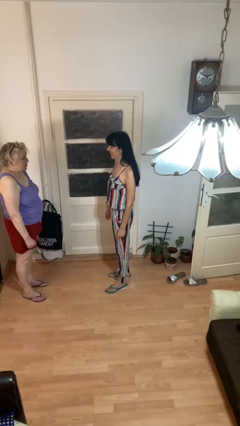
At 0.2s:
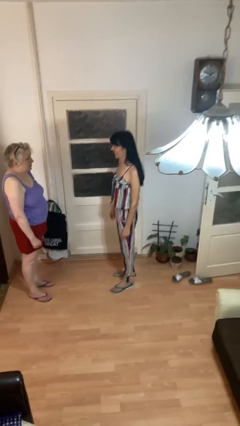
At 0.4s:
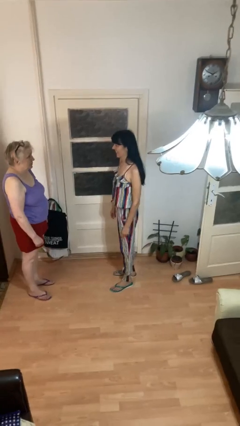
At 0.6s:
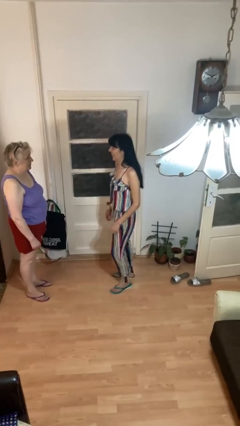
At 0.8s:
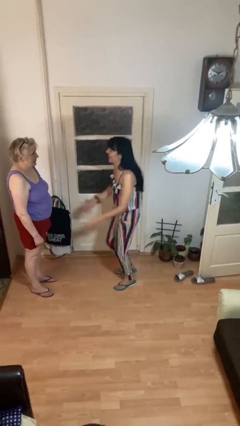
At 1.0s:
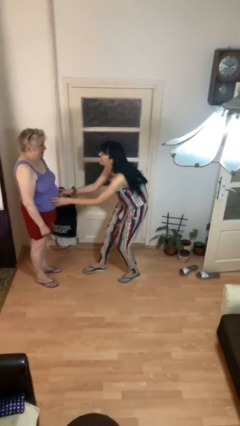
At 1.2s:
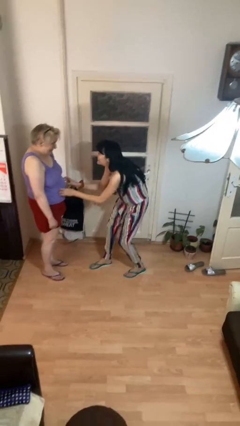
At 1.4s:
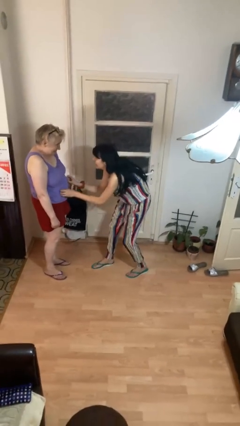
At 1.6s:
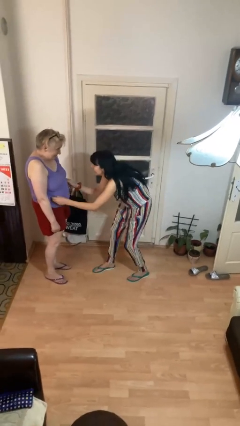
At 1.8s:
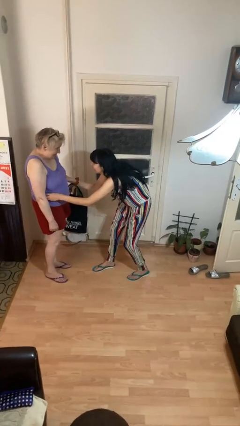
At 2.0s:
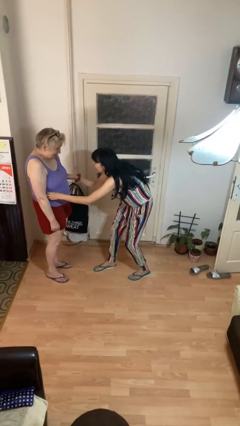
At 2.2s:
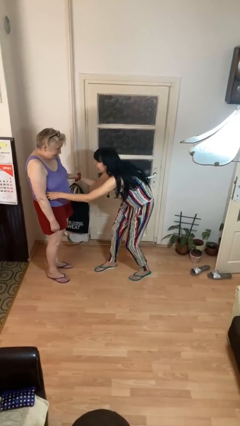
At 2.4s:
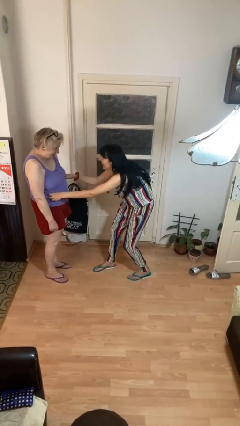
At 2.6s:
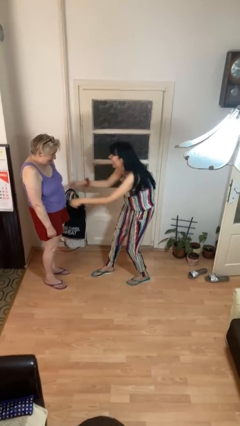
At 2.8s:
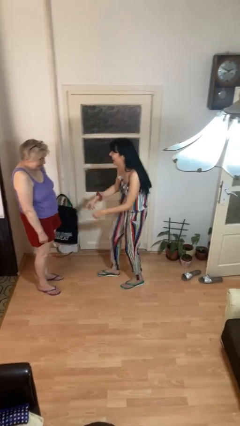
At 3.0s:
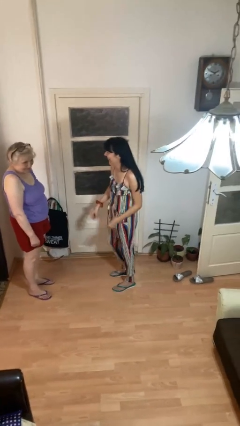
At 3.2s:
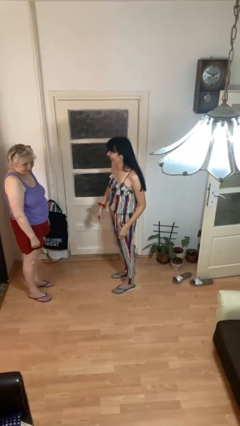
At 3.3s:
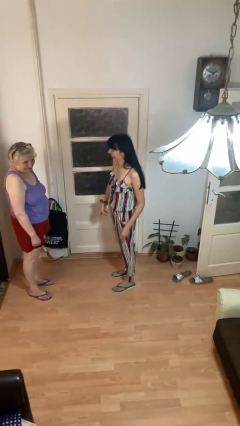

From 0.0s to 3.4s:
person tickles person

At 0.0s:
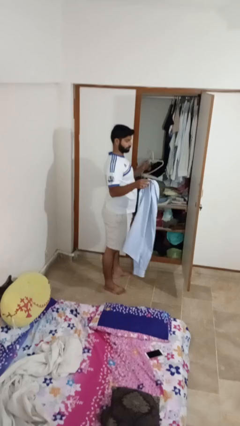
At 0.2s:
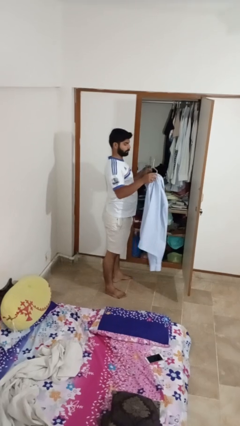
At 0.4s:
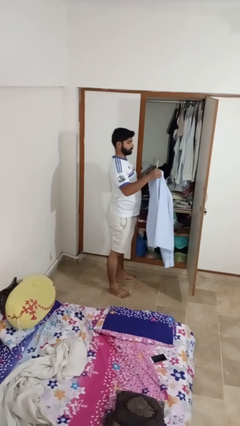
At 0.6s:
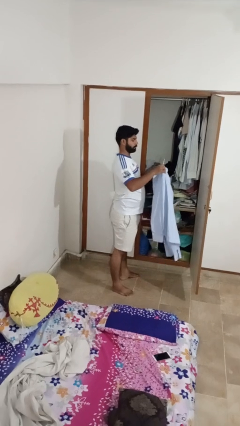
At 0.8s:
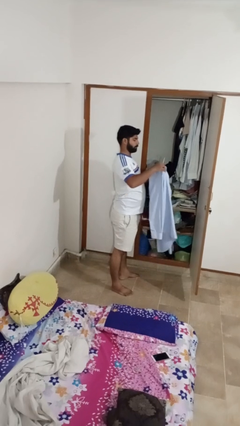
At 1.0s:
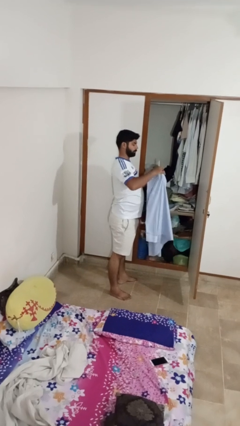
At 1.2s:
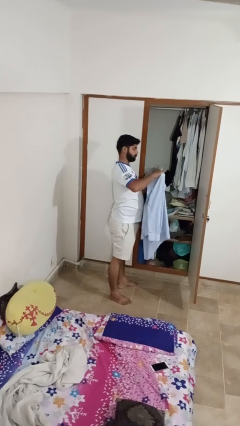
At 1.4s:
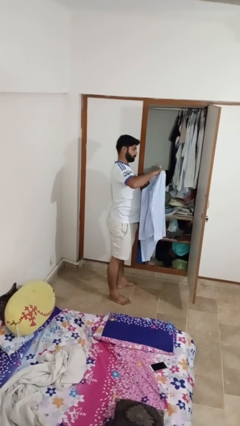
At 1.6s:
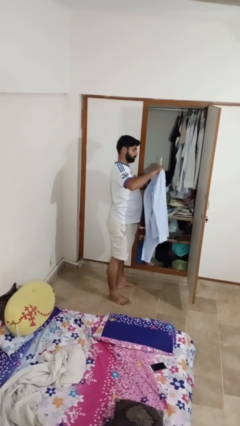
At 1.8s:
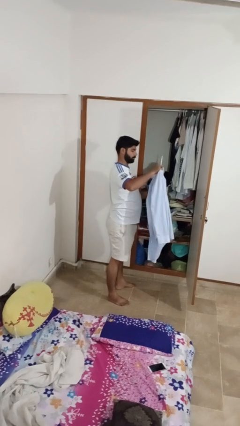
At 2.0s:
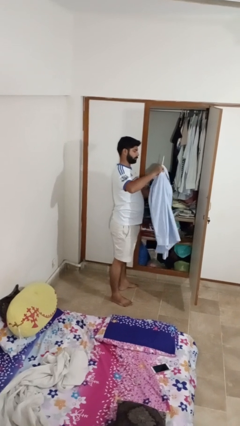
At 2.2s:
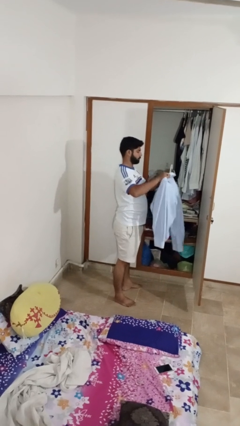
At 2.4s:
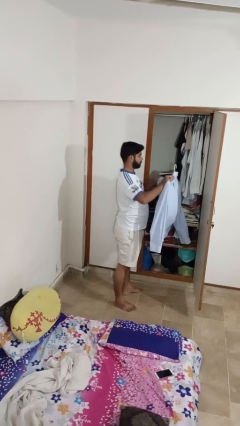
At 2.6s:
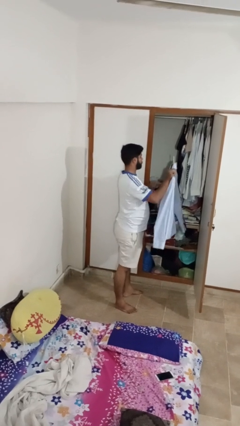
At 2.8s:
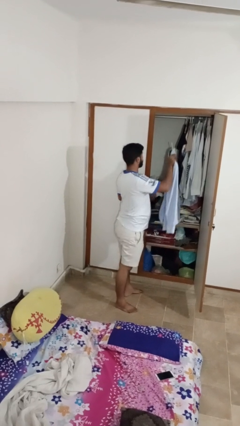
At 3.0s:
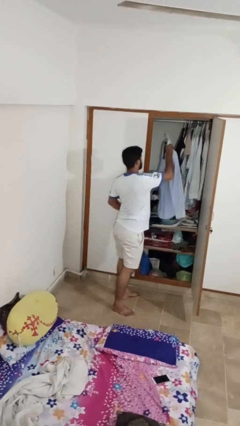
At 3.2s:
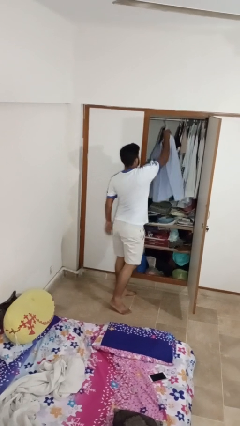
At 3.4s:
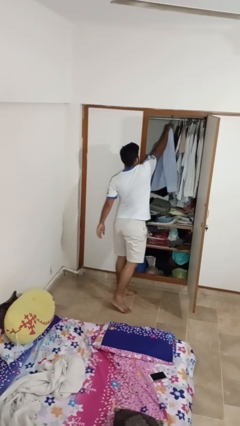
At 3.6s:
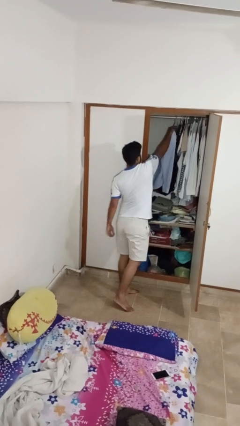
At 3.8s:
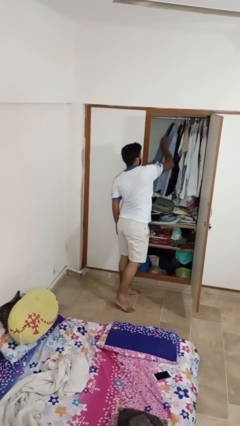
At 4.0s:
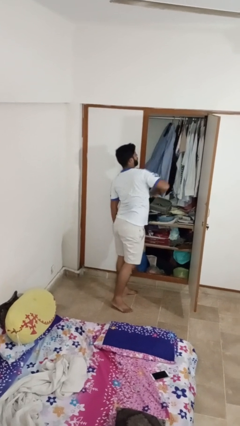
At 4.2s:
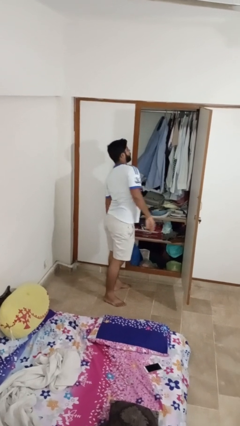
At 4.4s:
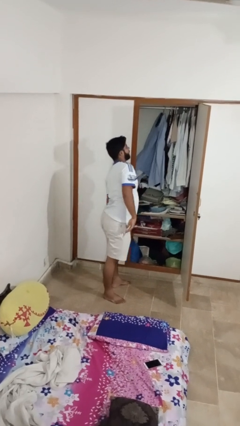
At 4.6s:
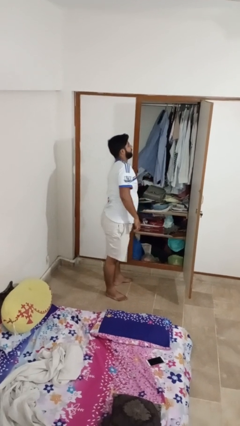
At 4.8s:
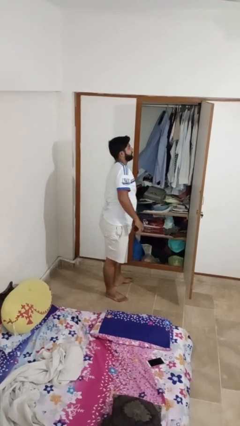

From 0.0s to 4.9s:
person puts clothes into closet

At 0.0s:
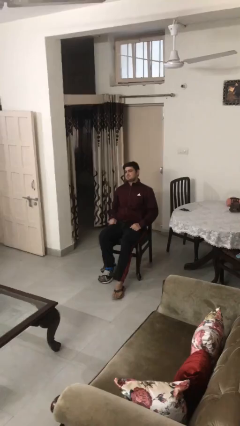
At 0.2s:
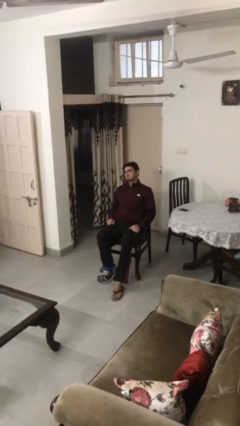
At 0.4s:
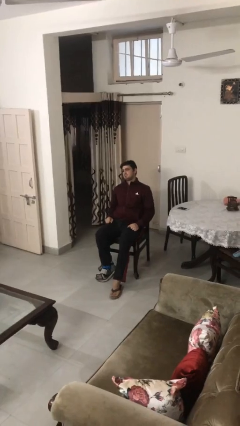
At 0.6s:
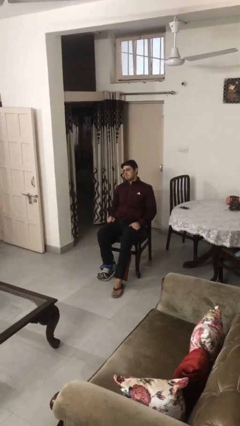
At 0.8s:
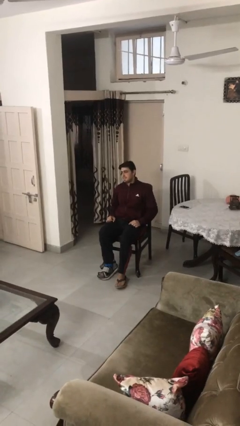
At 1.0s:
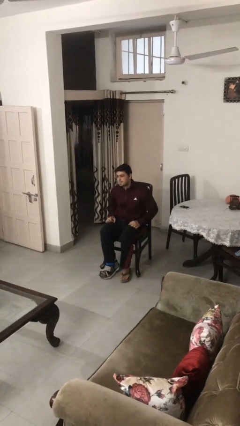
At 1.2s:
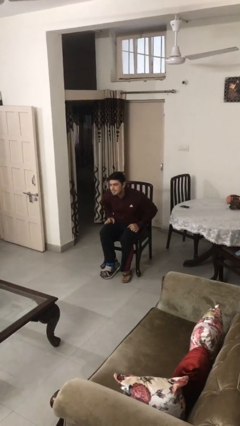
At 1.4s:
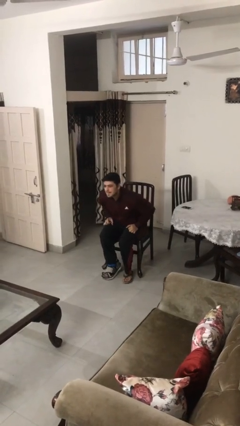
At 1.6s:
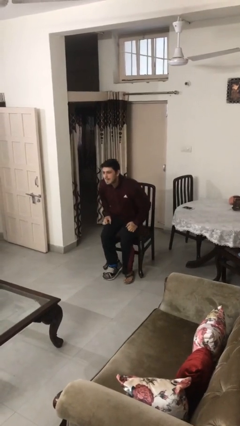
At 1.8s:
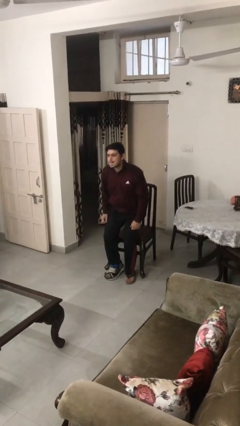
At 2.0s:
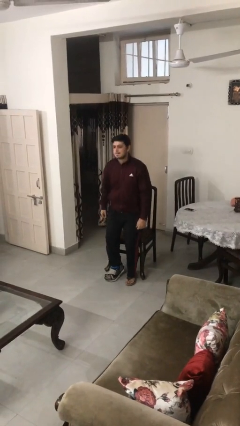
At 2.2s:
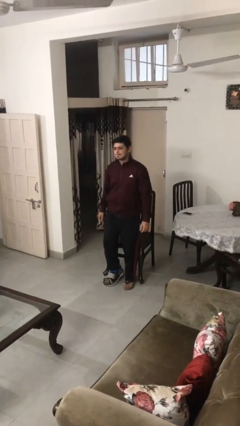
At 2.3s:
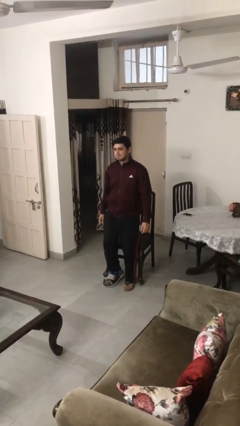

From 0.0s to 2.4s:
person stands up

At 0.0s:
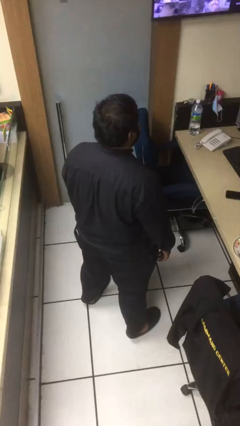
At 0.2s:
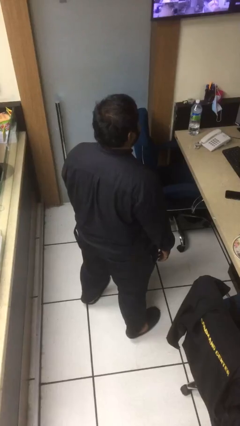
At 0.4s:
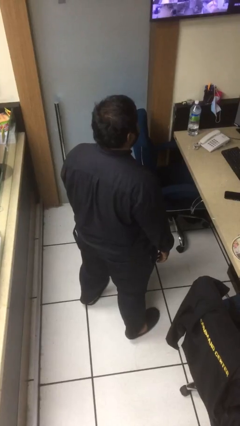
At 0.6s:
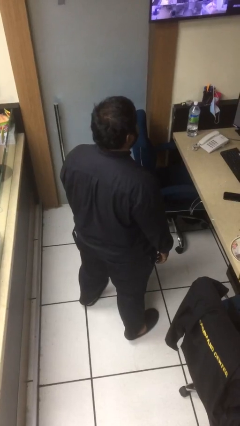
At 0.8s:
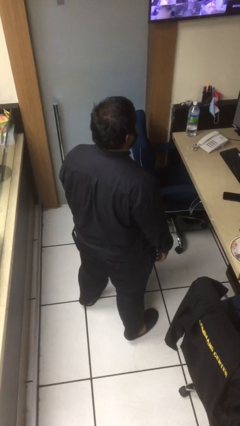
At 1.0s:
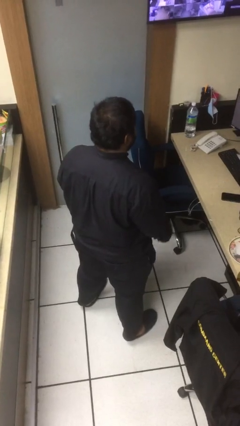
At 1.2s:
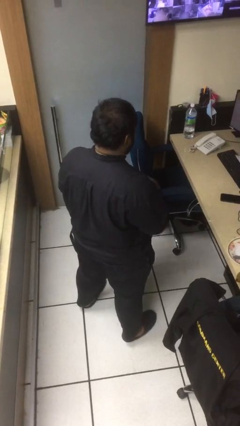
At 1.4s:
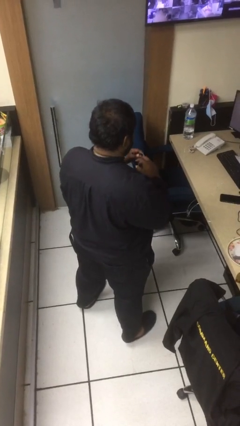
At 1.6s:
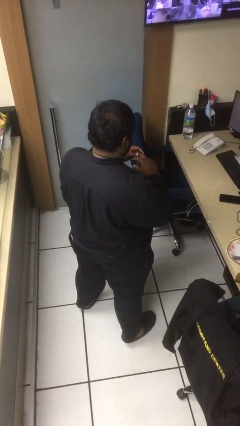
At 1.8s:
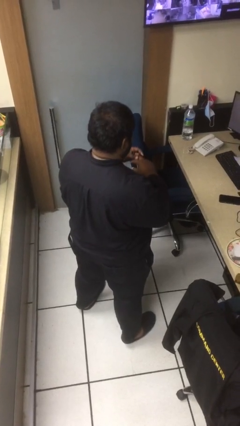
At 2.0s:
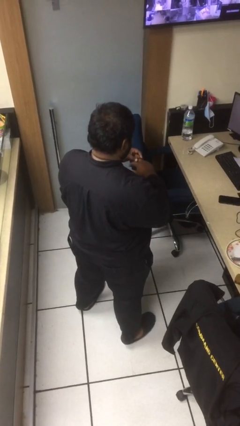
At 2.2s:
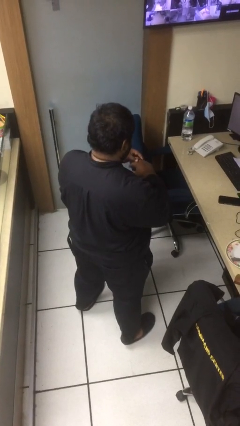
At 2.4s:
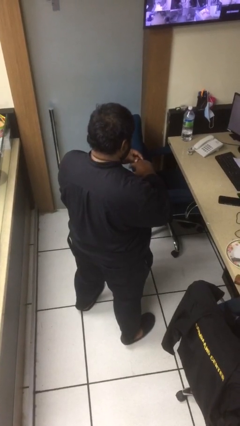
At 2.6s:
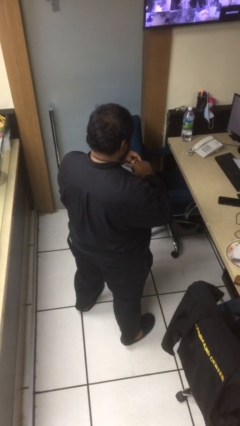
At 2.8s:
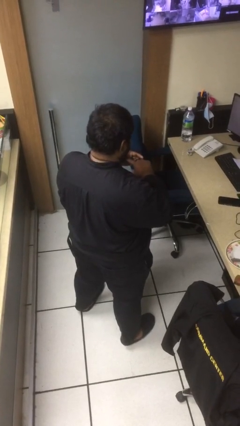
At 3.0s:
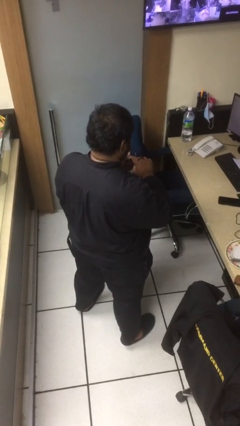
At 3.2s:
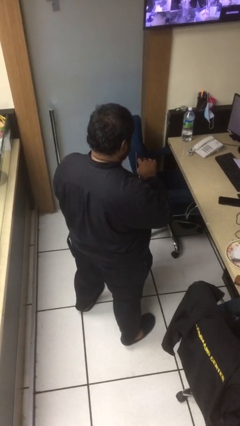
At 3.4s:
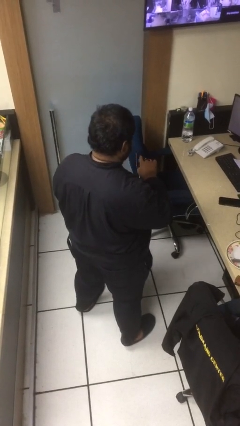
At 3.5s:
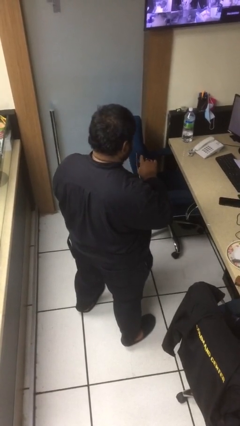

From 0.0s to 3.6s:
person puts on ring

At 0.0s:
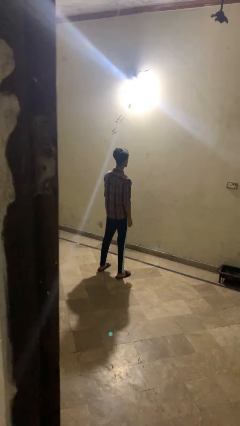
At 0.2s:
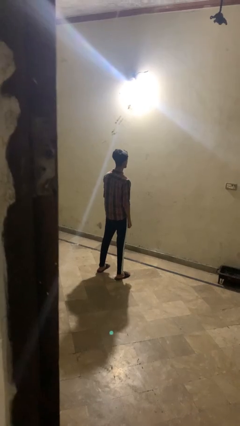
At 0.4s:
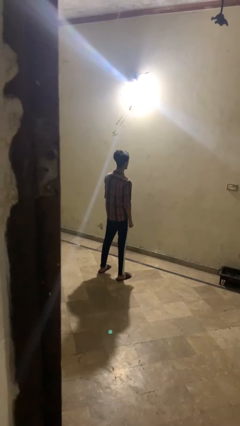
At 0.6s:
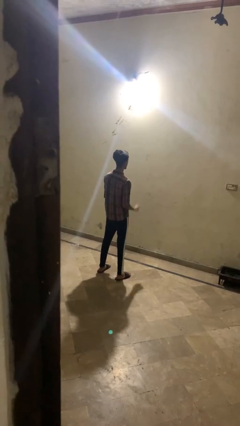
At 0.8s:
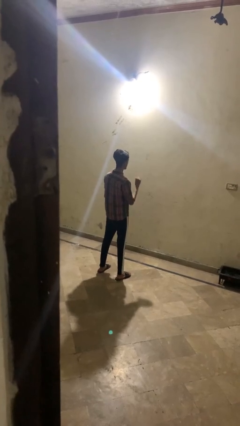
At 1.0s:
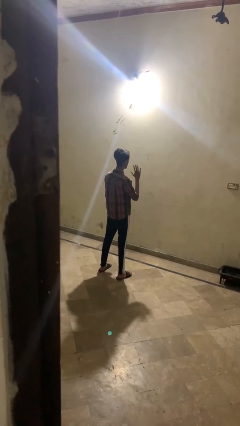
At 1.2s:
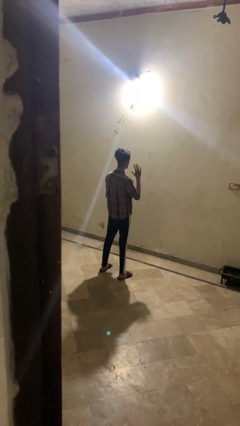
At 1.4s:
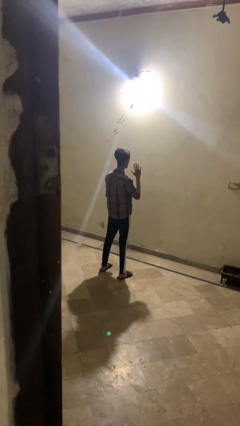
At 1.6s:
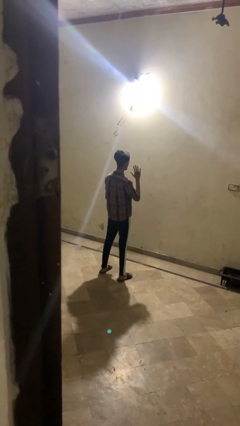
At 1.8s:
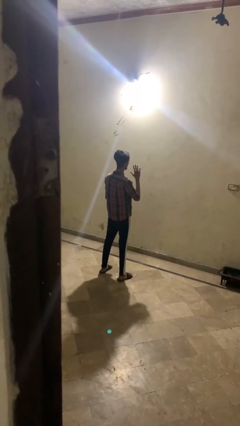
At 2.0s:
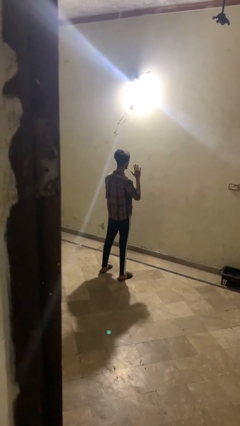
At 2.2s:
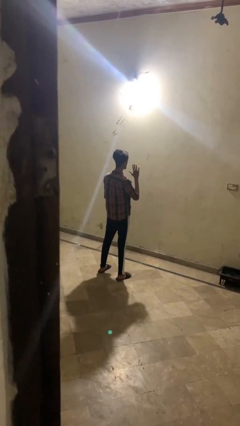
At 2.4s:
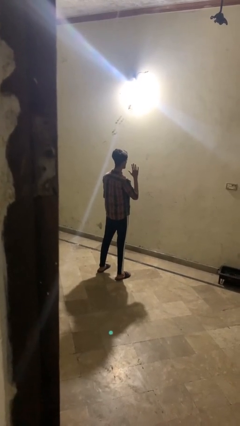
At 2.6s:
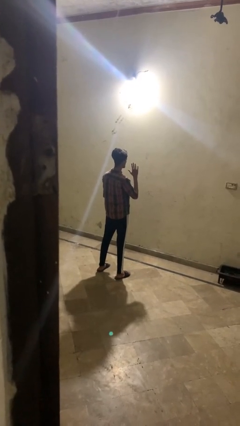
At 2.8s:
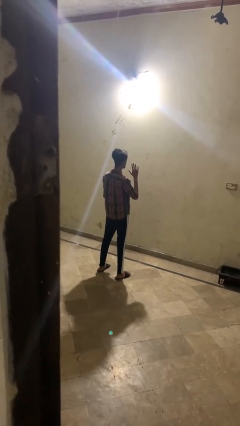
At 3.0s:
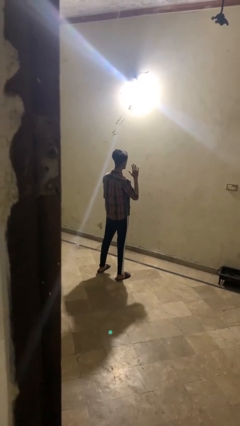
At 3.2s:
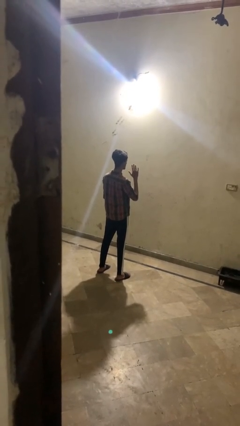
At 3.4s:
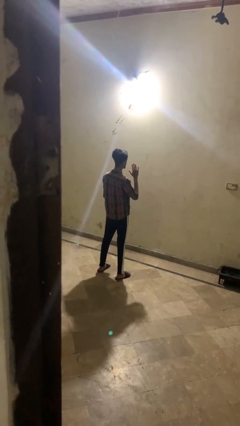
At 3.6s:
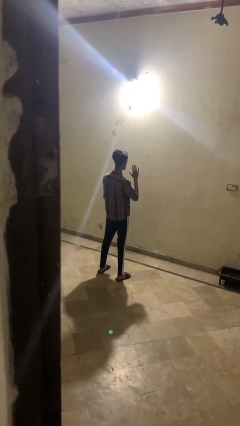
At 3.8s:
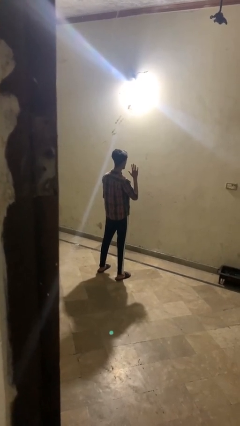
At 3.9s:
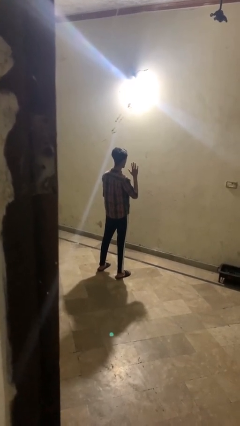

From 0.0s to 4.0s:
person gestures number five
